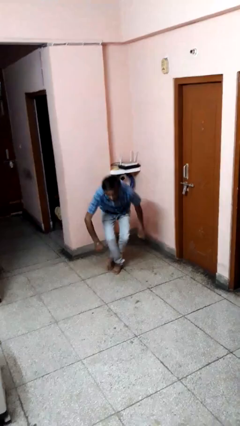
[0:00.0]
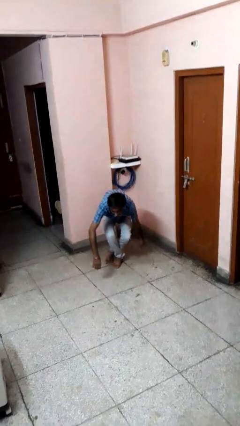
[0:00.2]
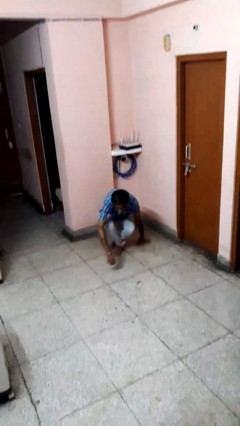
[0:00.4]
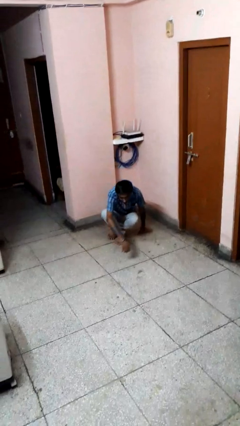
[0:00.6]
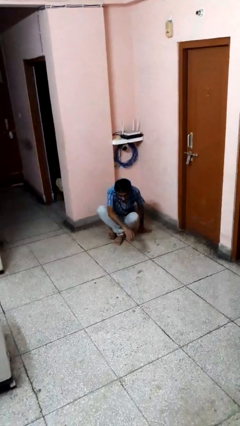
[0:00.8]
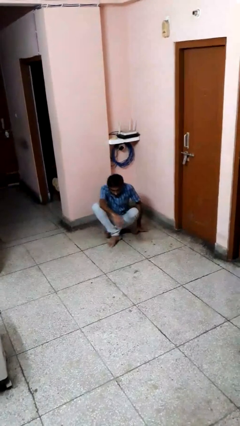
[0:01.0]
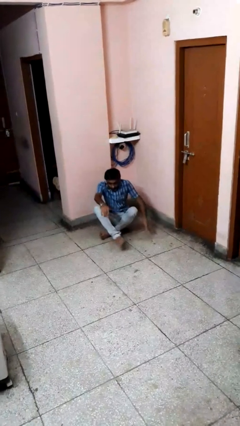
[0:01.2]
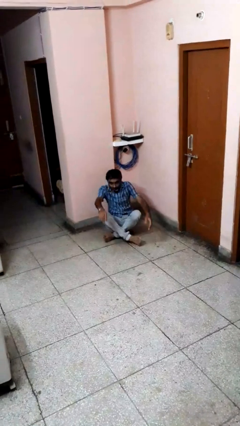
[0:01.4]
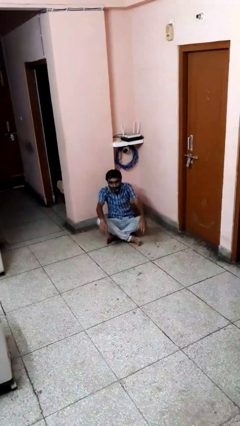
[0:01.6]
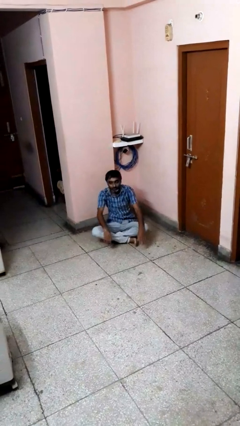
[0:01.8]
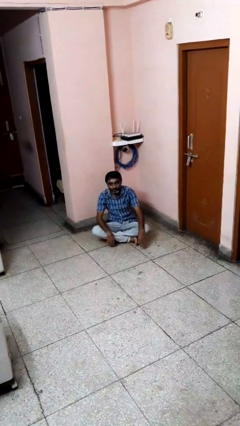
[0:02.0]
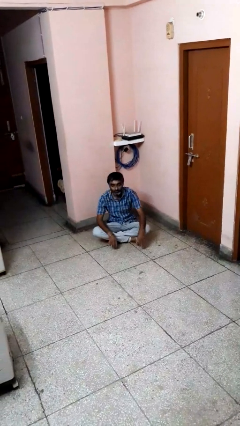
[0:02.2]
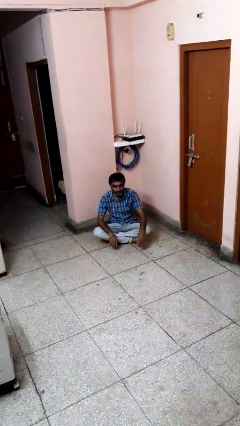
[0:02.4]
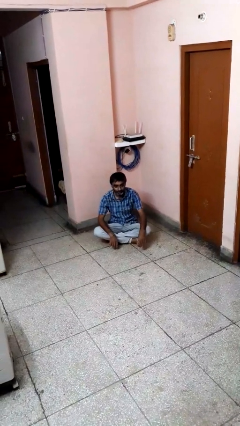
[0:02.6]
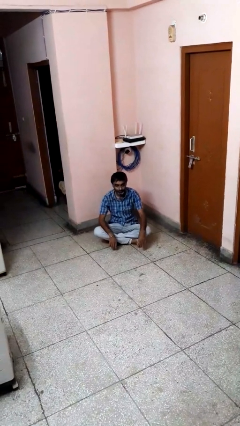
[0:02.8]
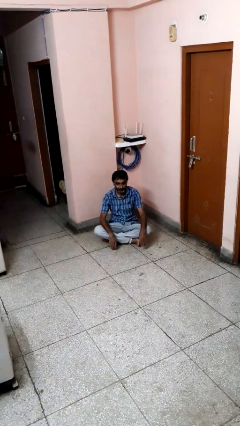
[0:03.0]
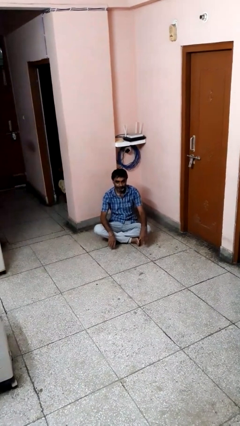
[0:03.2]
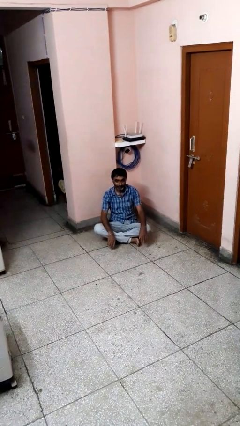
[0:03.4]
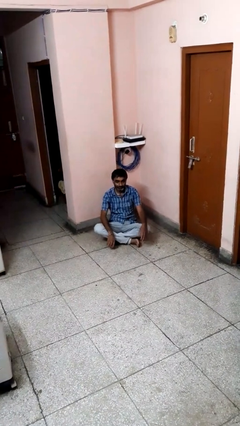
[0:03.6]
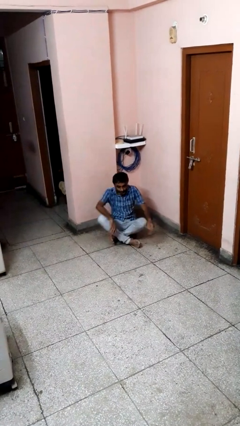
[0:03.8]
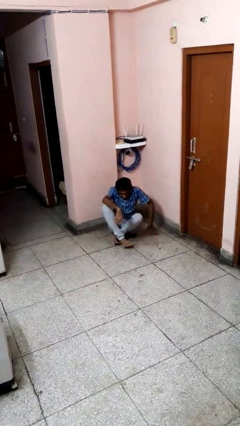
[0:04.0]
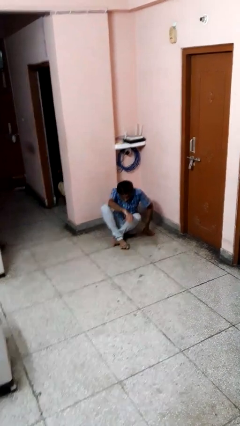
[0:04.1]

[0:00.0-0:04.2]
person sits crisscross

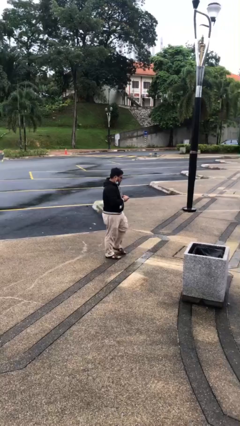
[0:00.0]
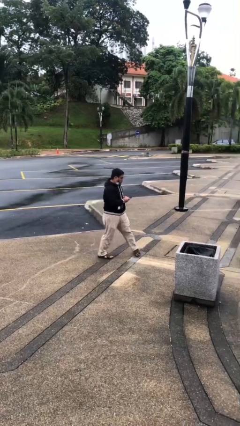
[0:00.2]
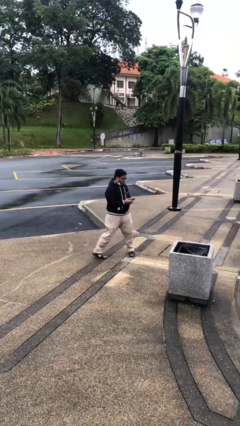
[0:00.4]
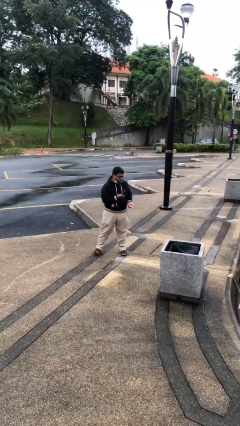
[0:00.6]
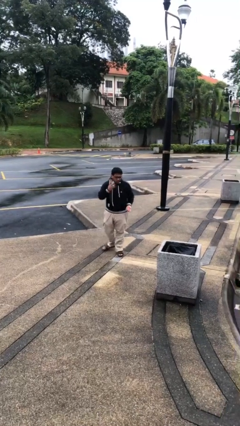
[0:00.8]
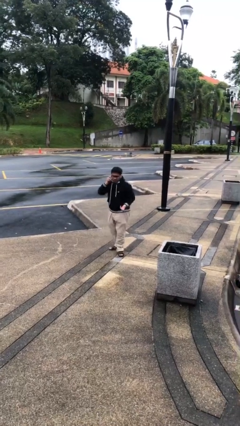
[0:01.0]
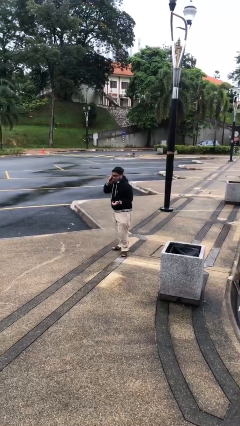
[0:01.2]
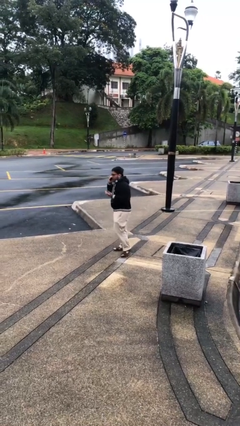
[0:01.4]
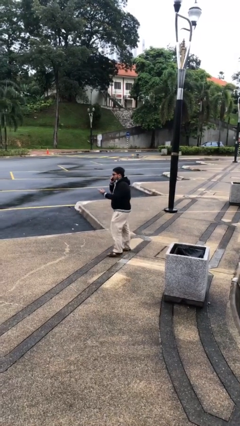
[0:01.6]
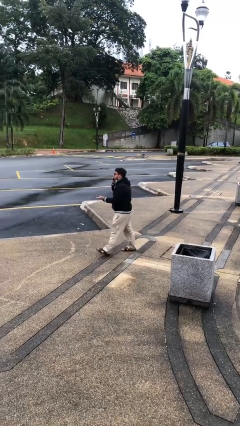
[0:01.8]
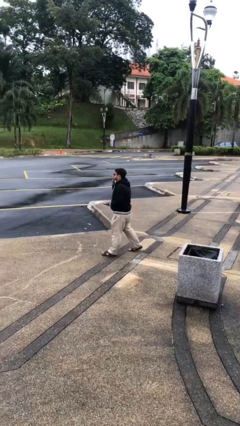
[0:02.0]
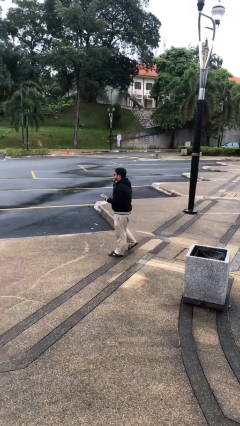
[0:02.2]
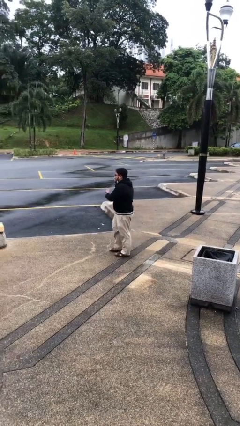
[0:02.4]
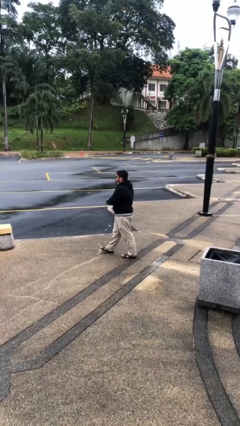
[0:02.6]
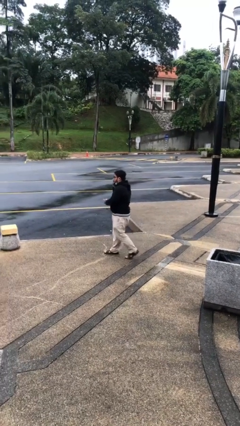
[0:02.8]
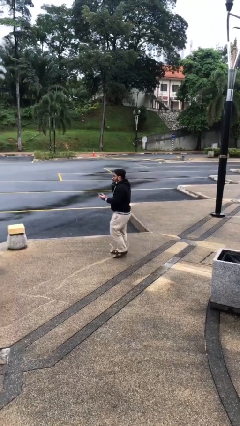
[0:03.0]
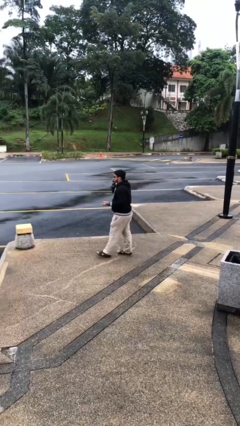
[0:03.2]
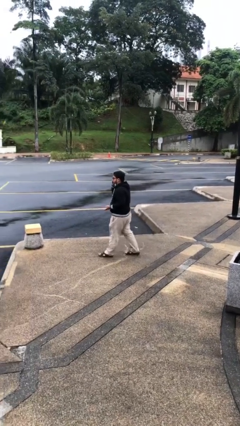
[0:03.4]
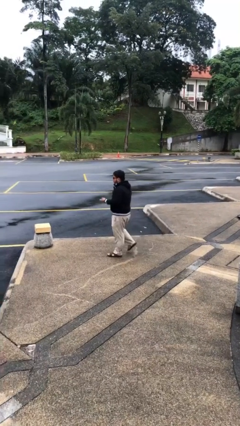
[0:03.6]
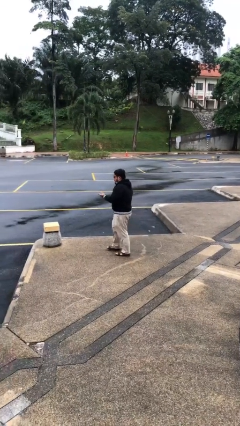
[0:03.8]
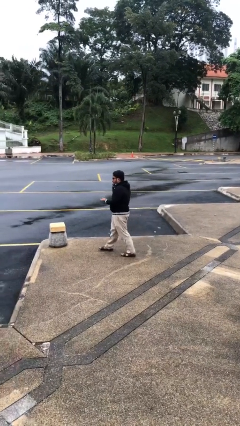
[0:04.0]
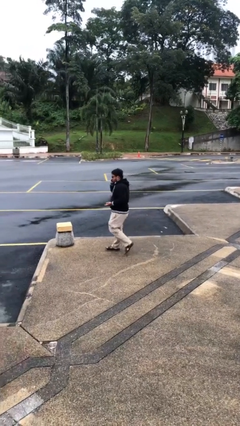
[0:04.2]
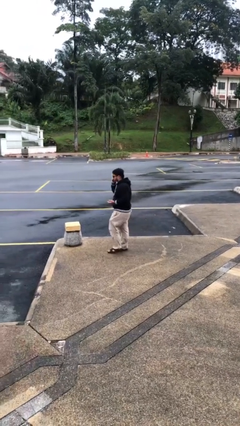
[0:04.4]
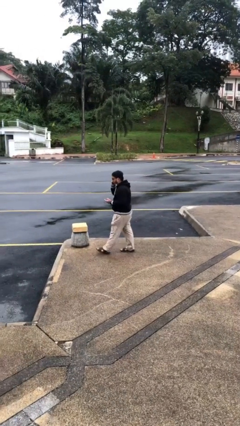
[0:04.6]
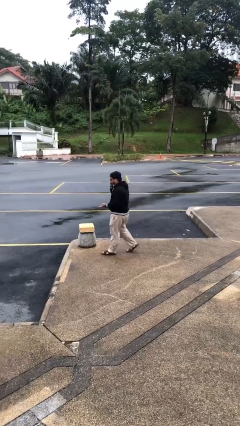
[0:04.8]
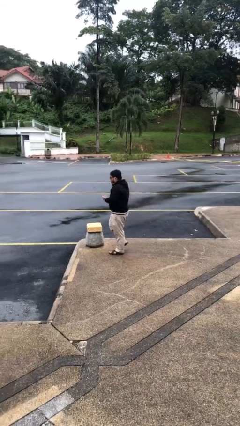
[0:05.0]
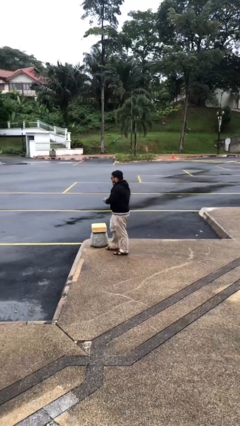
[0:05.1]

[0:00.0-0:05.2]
person talks on phone

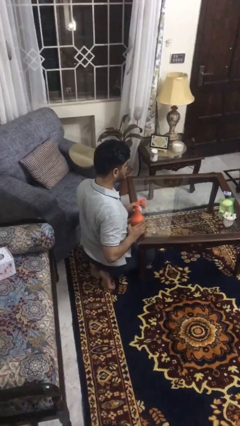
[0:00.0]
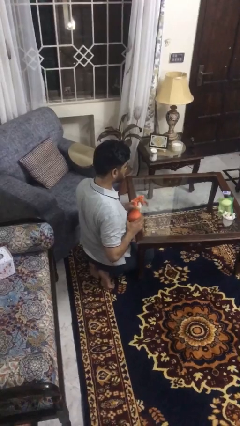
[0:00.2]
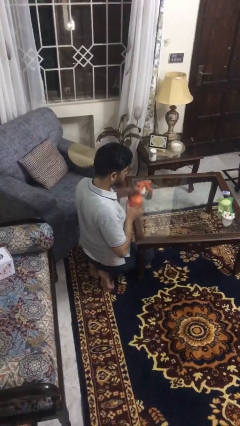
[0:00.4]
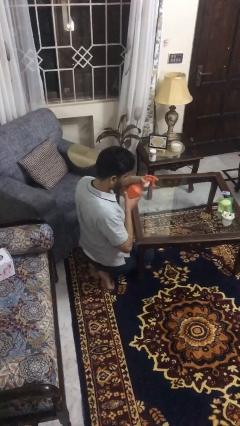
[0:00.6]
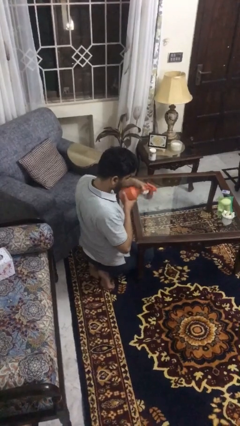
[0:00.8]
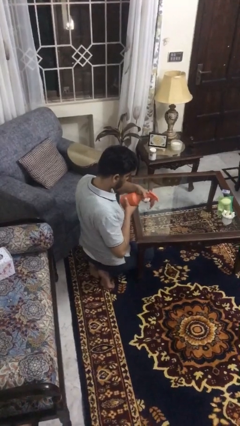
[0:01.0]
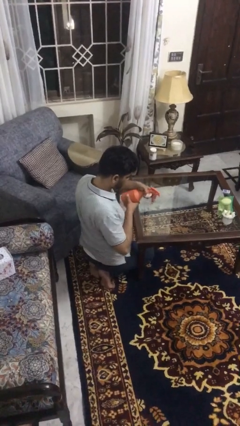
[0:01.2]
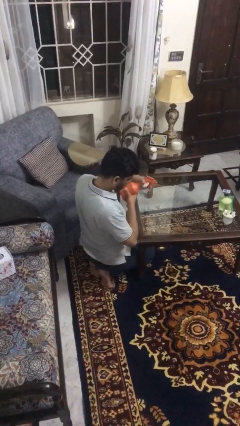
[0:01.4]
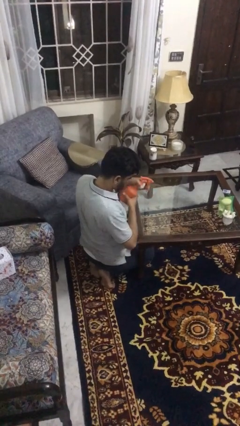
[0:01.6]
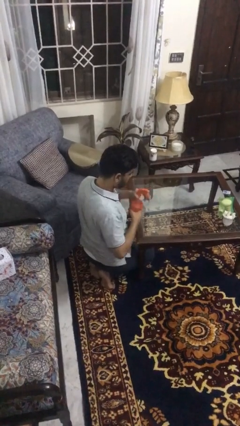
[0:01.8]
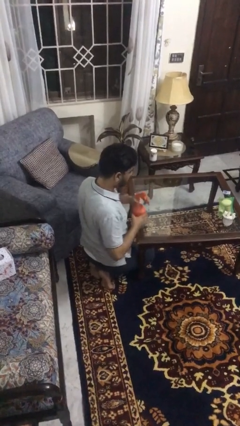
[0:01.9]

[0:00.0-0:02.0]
person sprays from bottle

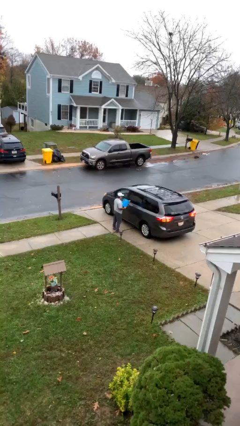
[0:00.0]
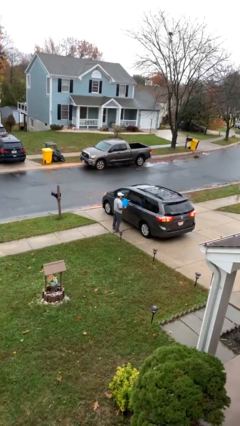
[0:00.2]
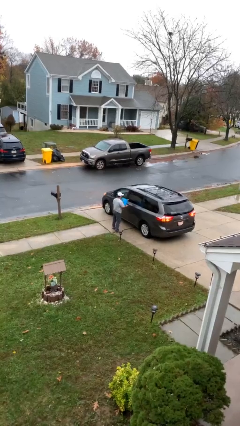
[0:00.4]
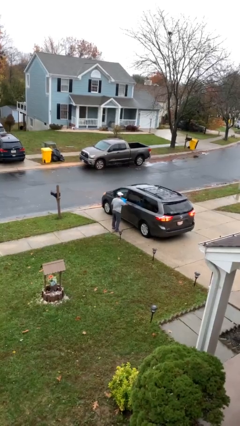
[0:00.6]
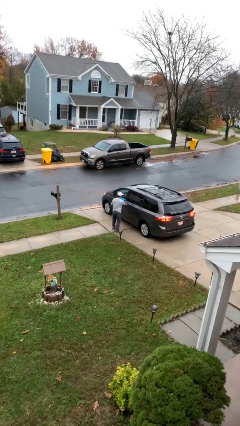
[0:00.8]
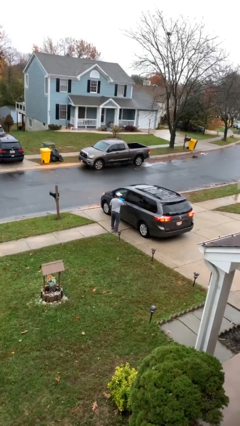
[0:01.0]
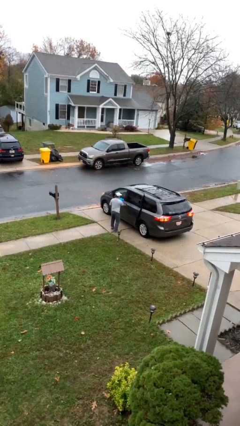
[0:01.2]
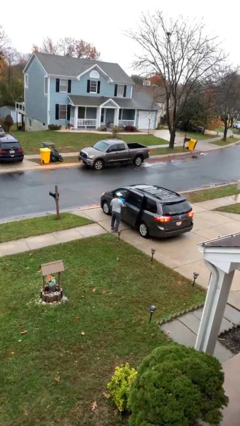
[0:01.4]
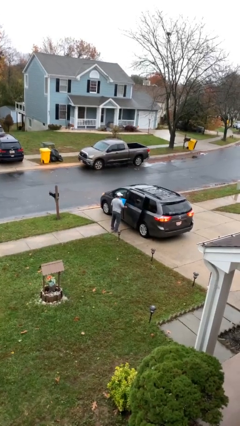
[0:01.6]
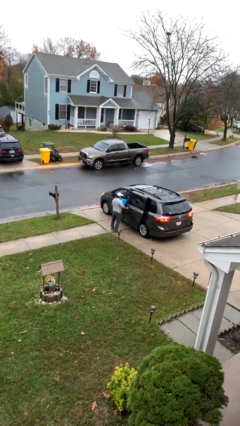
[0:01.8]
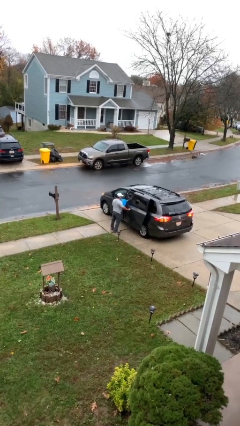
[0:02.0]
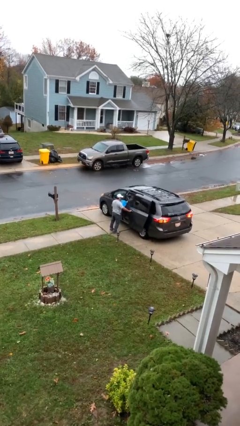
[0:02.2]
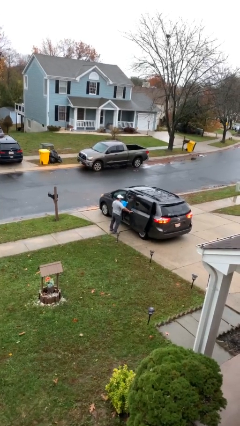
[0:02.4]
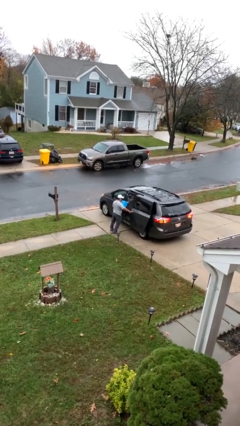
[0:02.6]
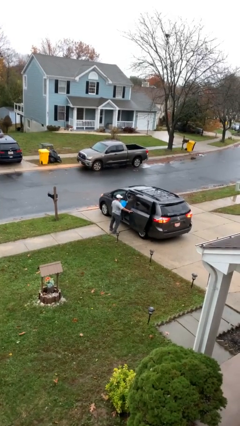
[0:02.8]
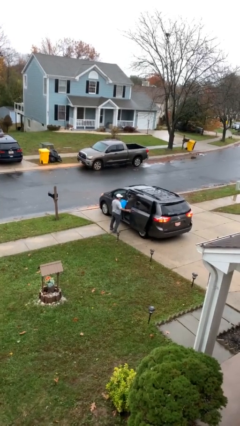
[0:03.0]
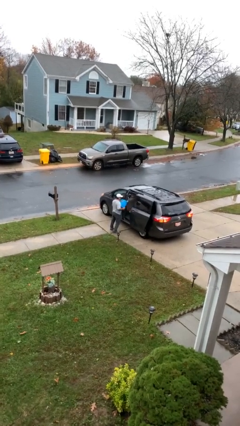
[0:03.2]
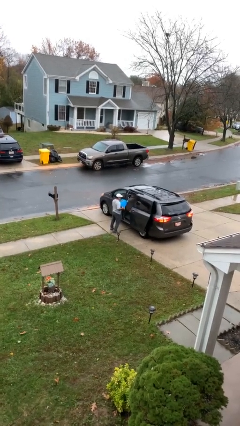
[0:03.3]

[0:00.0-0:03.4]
person opens car door

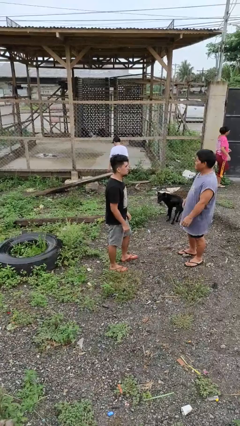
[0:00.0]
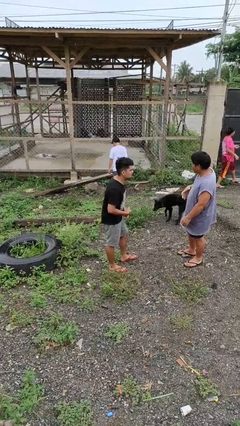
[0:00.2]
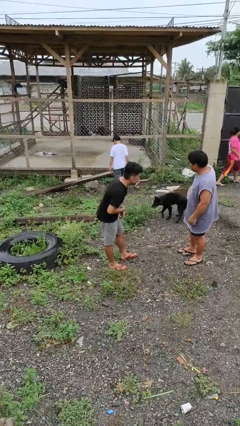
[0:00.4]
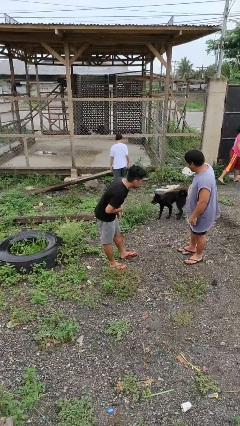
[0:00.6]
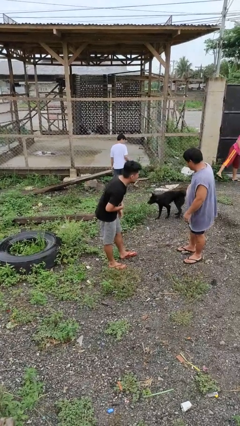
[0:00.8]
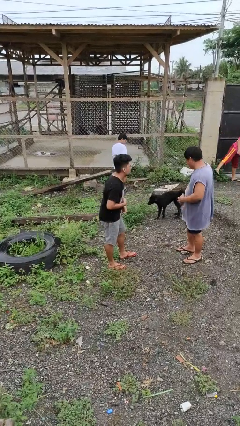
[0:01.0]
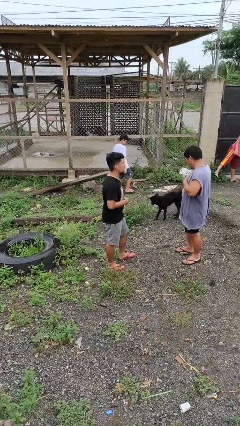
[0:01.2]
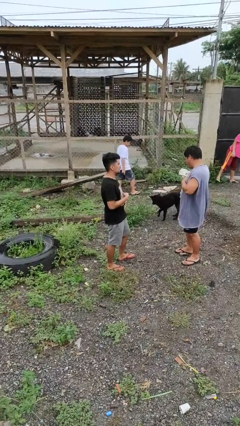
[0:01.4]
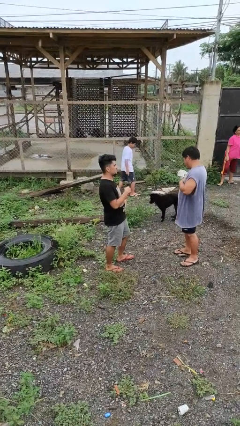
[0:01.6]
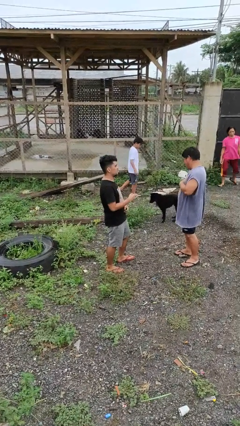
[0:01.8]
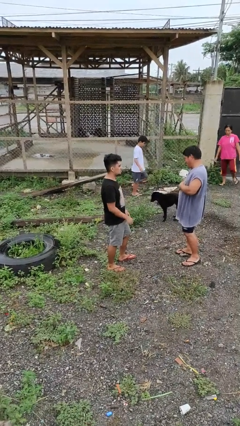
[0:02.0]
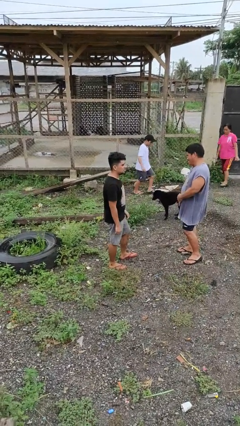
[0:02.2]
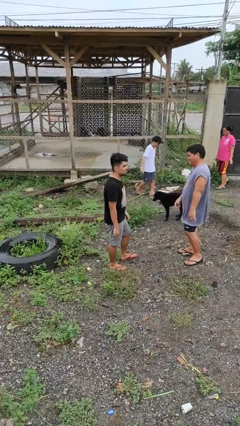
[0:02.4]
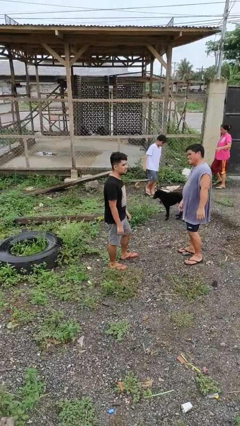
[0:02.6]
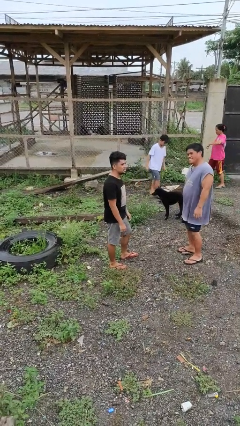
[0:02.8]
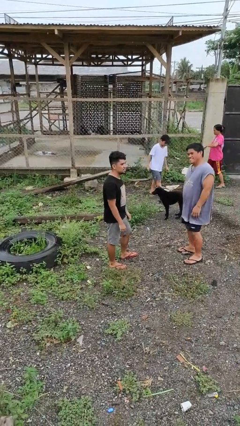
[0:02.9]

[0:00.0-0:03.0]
person laughs with person
